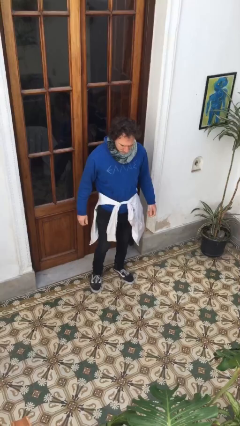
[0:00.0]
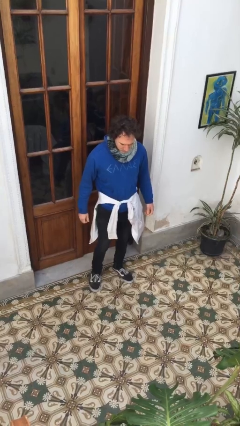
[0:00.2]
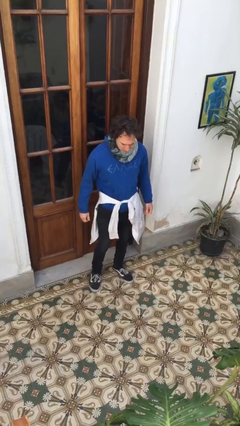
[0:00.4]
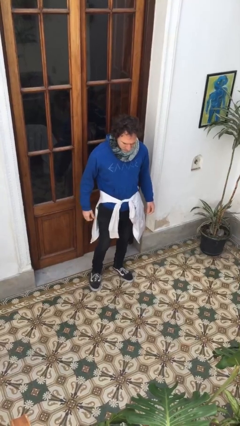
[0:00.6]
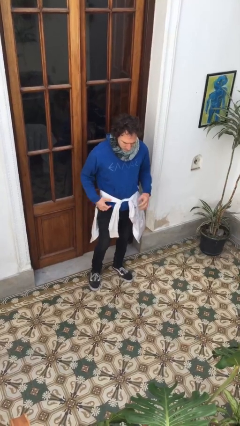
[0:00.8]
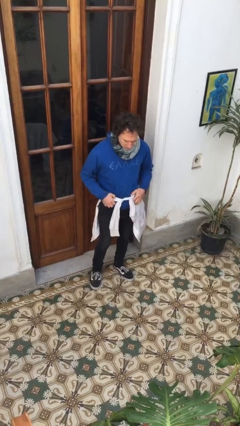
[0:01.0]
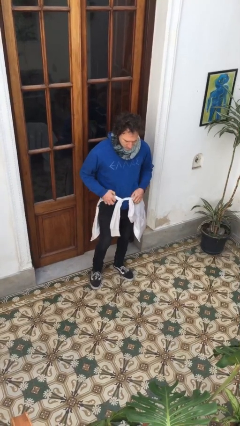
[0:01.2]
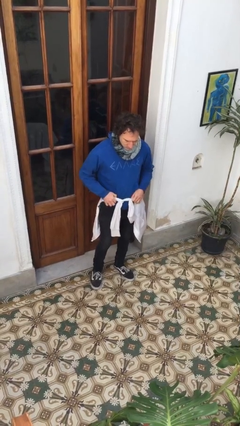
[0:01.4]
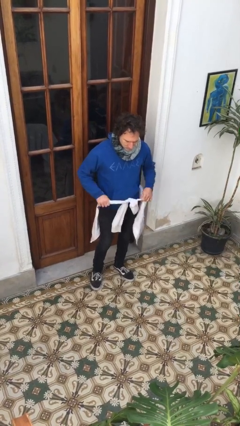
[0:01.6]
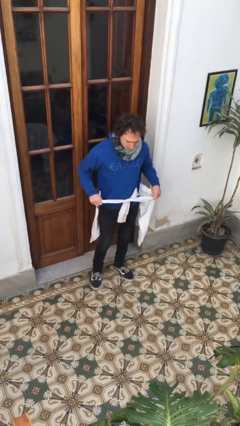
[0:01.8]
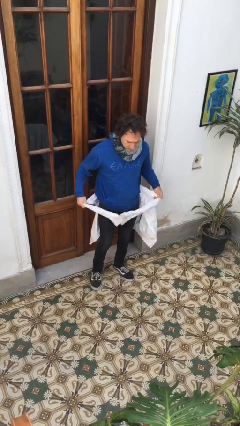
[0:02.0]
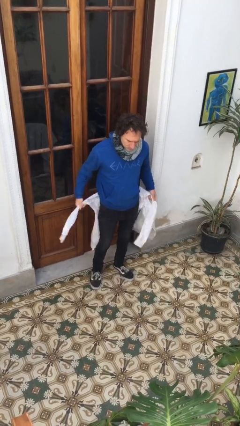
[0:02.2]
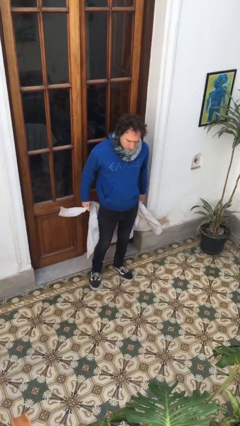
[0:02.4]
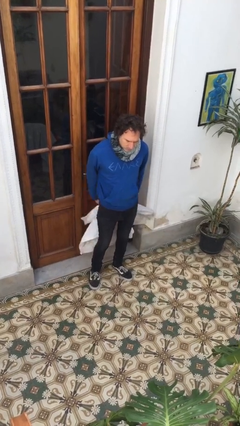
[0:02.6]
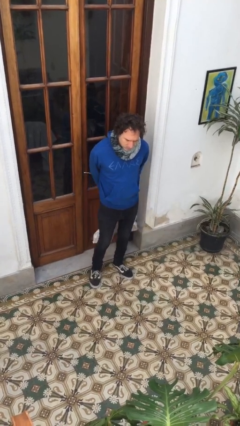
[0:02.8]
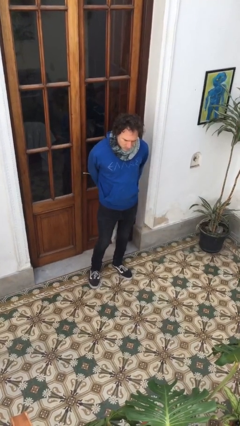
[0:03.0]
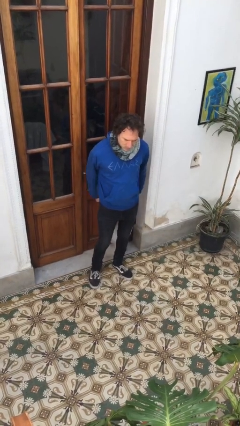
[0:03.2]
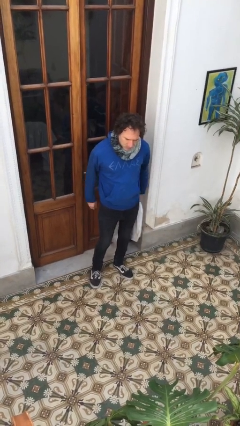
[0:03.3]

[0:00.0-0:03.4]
person unties jacket around waist

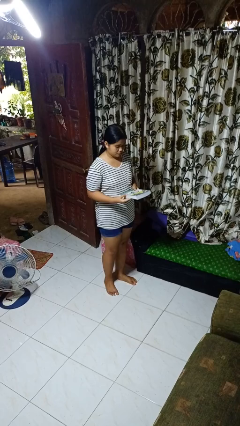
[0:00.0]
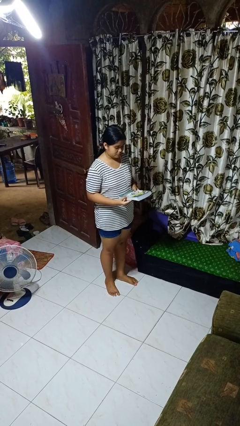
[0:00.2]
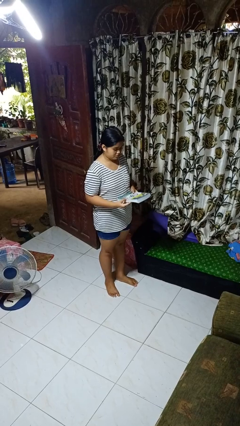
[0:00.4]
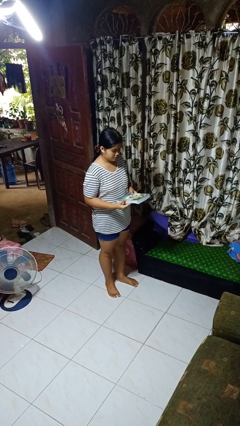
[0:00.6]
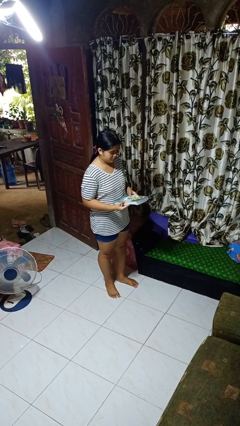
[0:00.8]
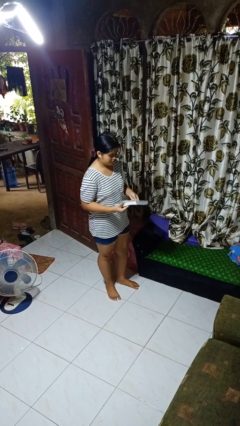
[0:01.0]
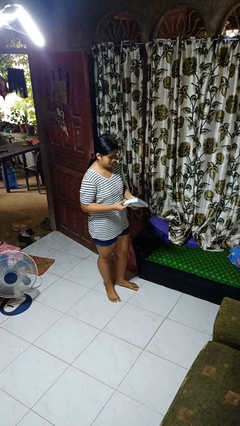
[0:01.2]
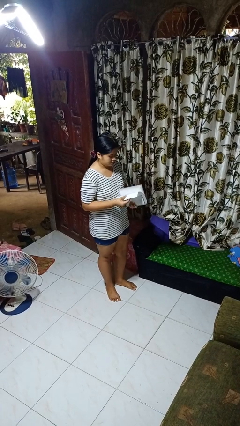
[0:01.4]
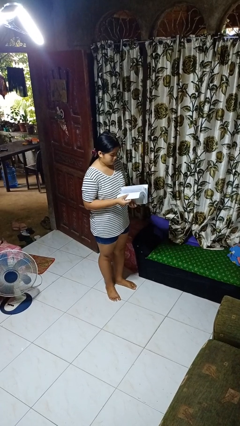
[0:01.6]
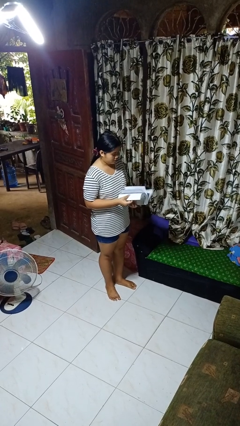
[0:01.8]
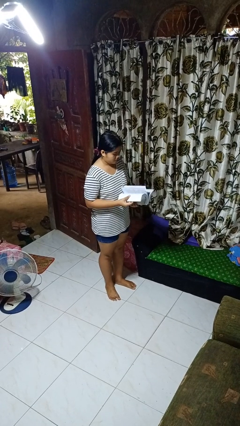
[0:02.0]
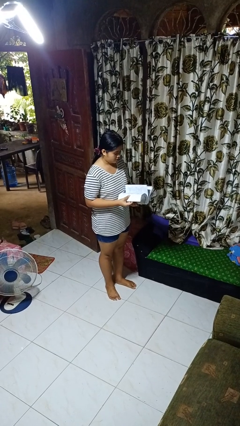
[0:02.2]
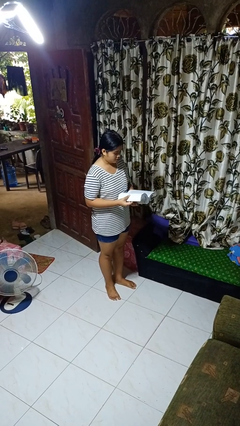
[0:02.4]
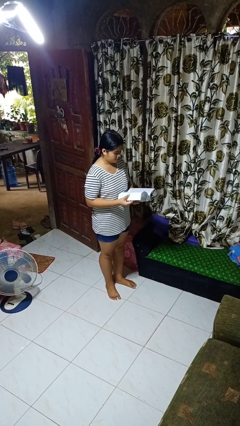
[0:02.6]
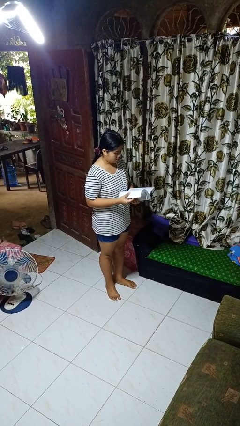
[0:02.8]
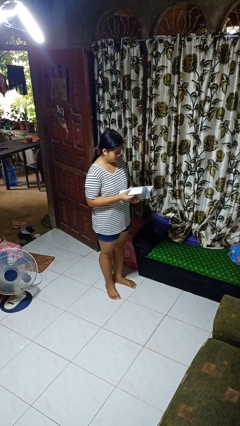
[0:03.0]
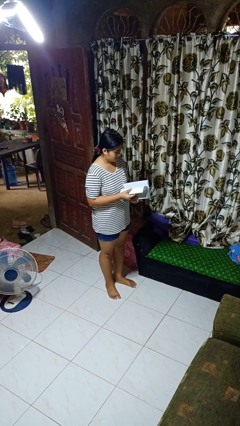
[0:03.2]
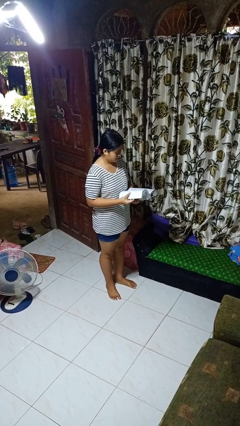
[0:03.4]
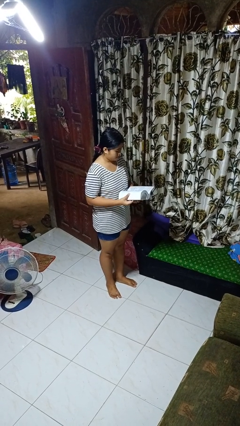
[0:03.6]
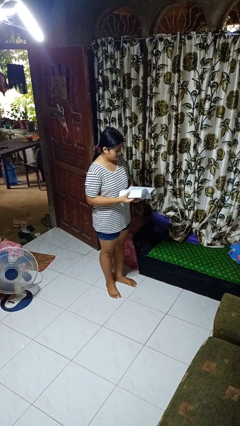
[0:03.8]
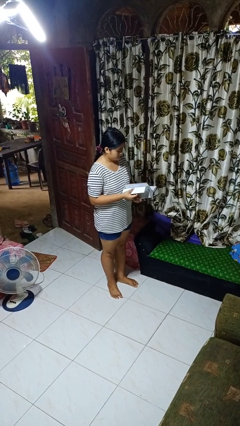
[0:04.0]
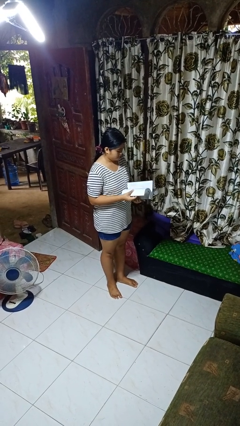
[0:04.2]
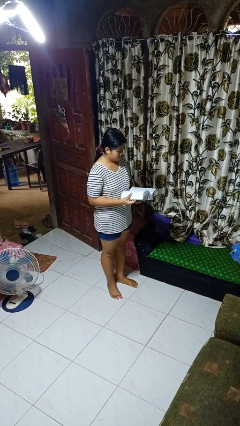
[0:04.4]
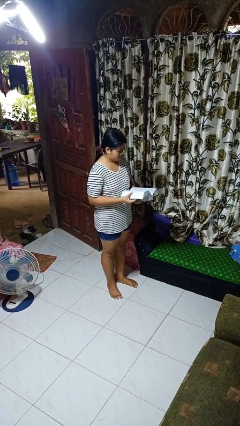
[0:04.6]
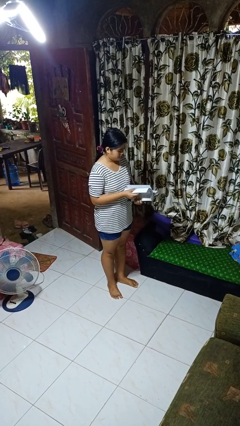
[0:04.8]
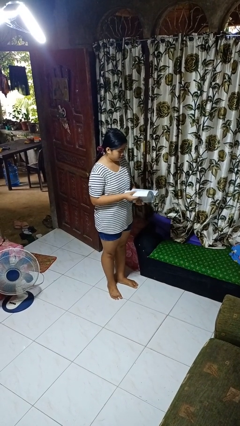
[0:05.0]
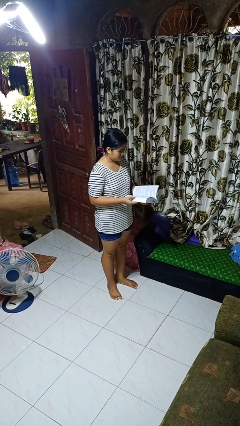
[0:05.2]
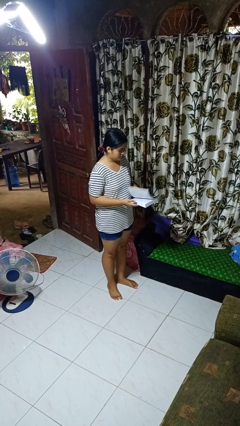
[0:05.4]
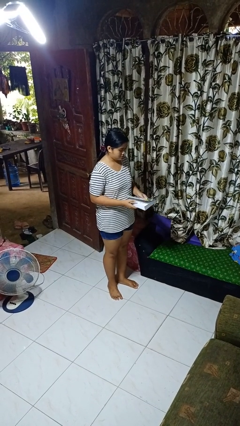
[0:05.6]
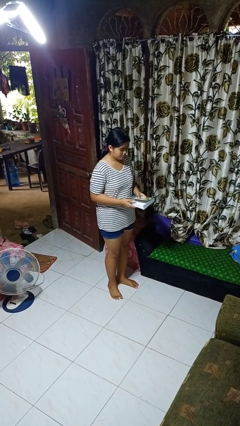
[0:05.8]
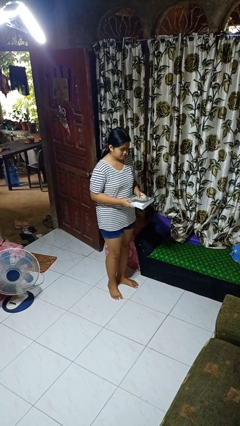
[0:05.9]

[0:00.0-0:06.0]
person reads book

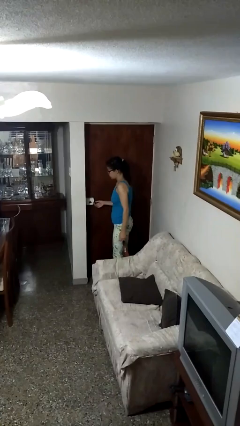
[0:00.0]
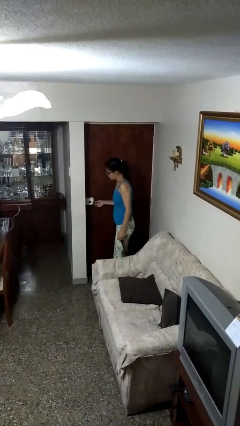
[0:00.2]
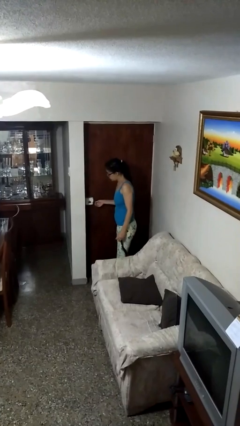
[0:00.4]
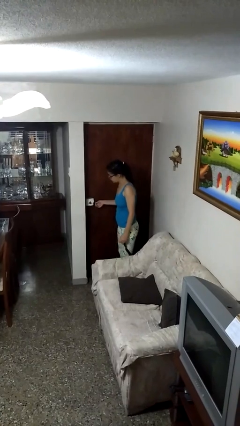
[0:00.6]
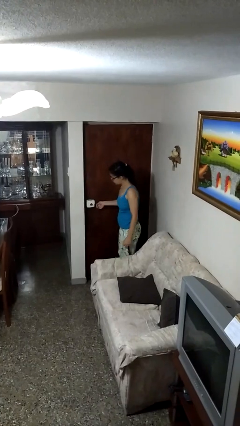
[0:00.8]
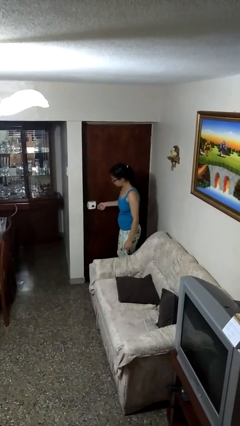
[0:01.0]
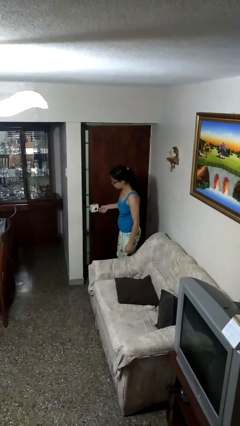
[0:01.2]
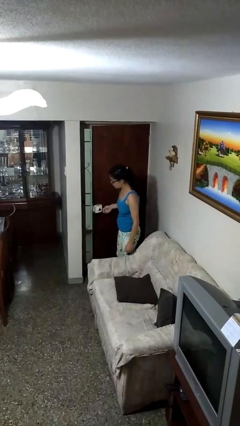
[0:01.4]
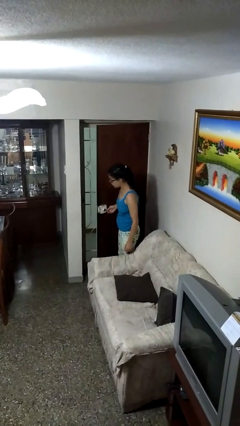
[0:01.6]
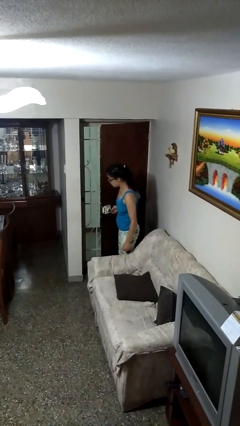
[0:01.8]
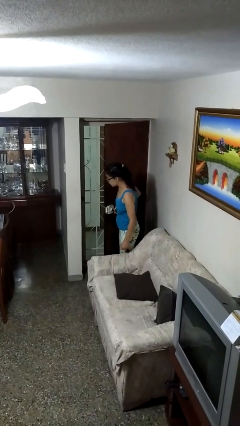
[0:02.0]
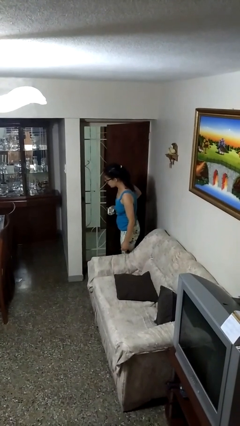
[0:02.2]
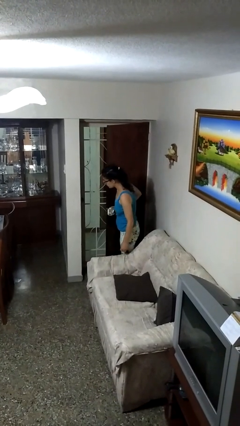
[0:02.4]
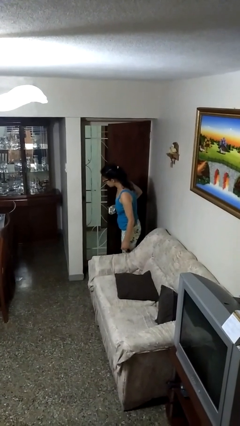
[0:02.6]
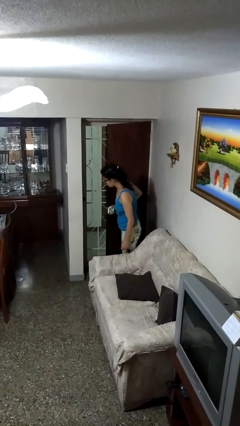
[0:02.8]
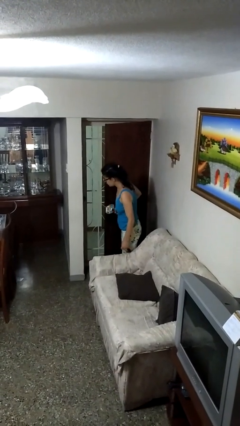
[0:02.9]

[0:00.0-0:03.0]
person opens facility door

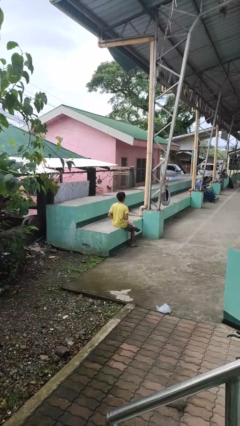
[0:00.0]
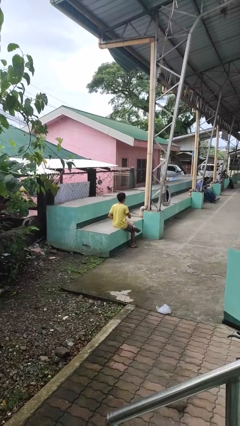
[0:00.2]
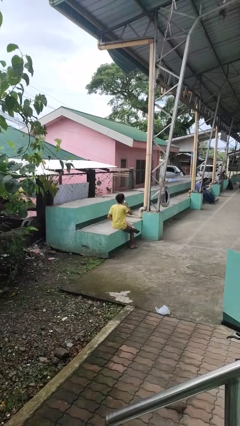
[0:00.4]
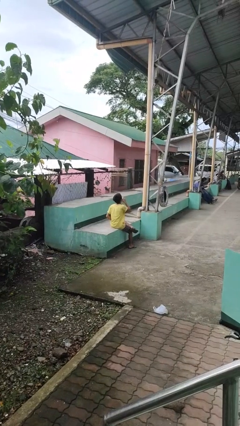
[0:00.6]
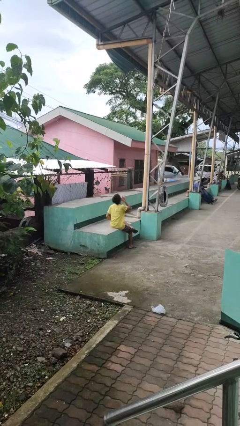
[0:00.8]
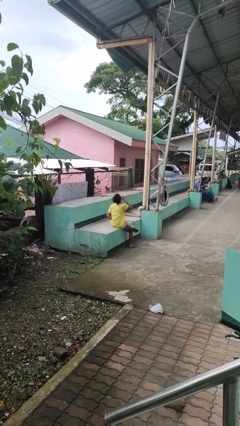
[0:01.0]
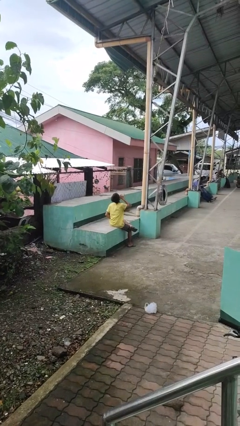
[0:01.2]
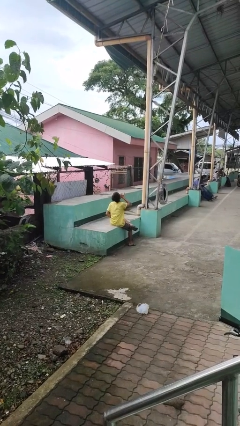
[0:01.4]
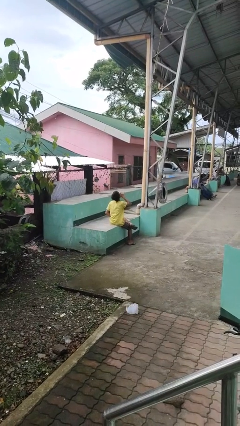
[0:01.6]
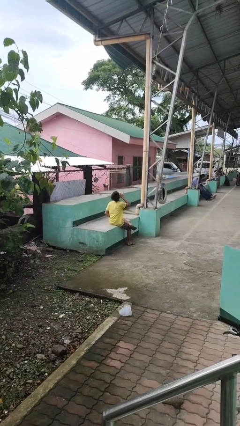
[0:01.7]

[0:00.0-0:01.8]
person drinks from bottle

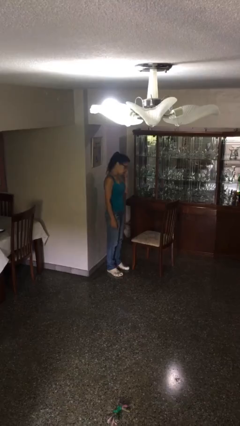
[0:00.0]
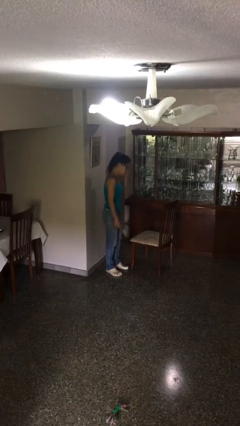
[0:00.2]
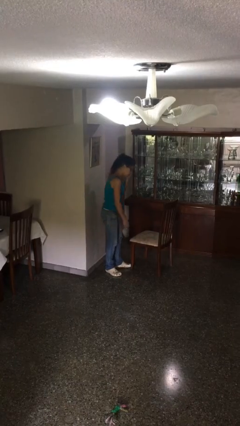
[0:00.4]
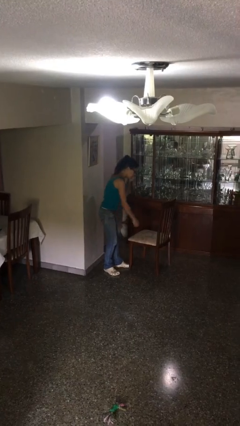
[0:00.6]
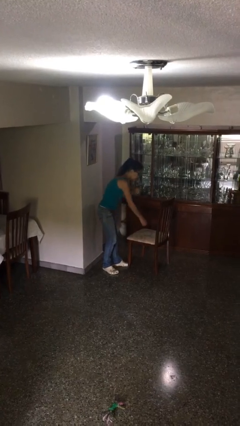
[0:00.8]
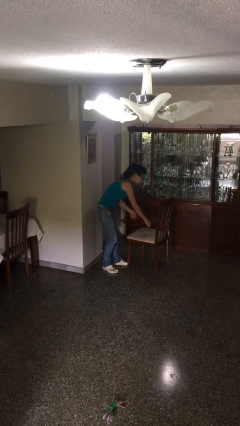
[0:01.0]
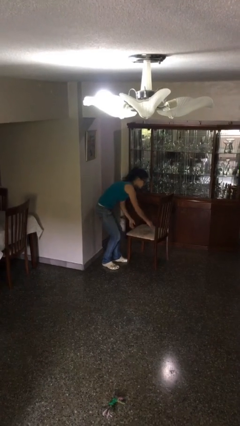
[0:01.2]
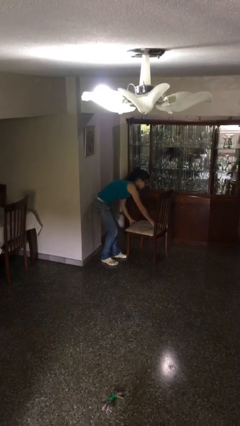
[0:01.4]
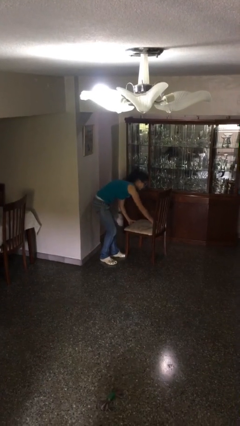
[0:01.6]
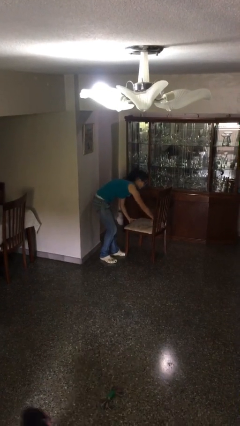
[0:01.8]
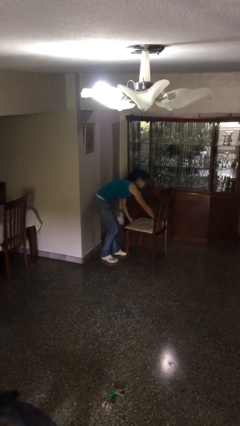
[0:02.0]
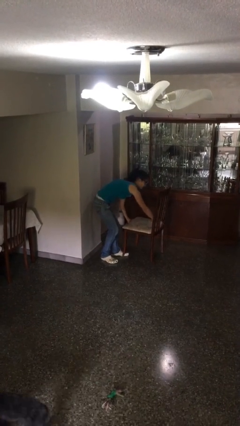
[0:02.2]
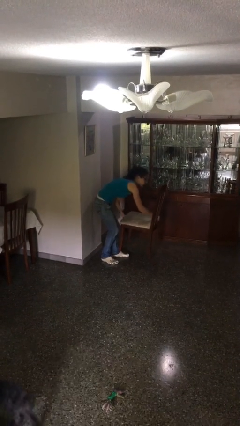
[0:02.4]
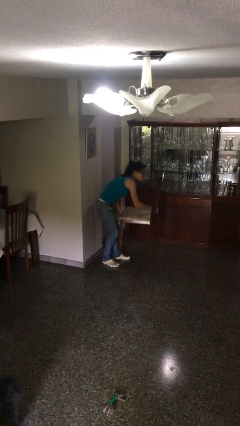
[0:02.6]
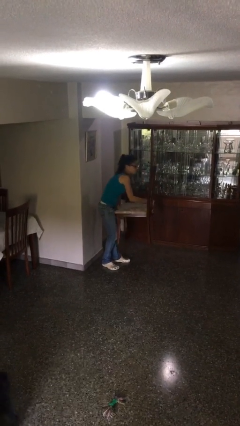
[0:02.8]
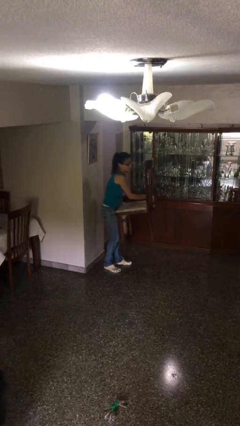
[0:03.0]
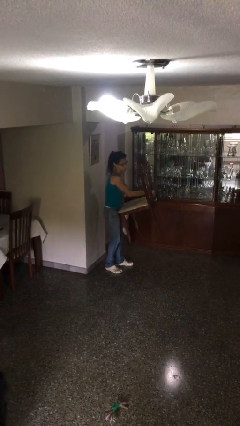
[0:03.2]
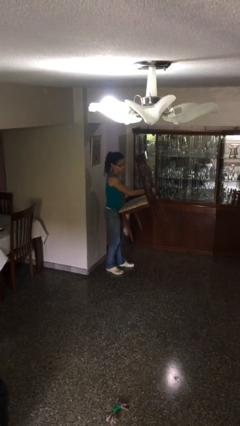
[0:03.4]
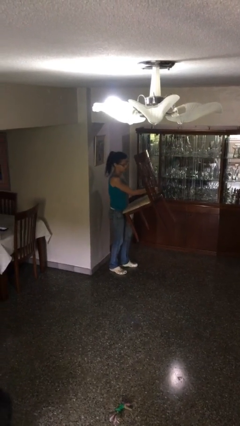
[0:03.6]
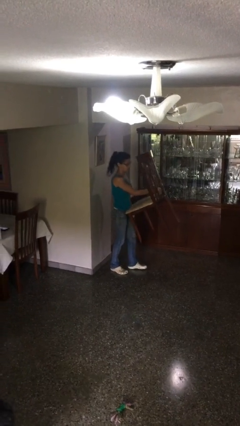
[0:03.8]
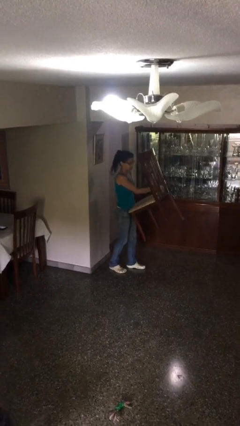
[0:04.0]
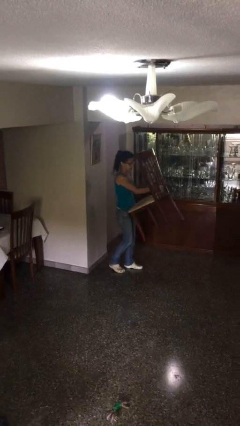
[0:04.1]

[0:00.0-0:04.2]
person picks up object from floor
